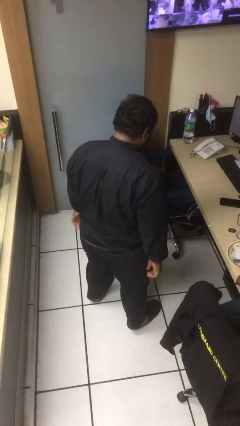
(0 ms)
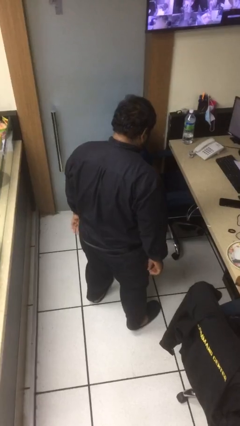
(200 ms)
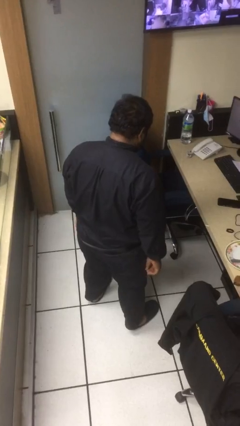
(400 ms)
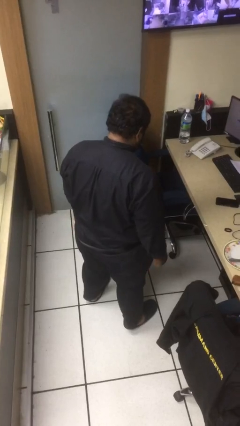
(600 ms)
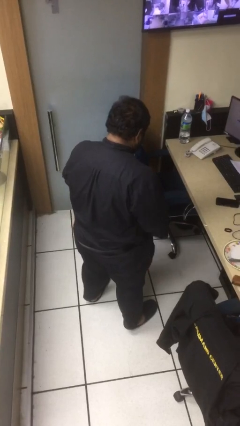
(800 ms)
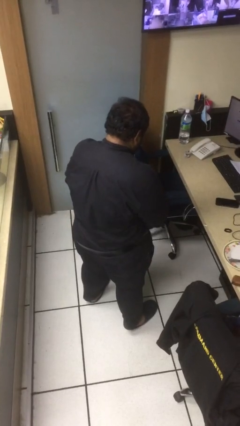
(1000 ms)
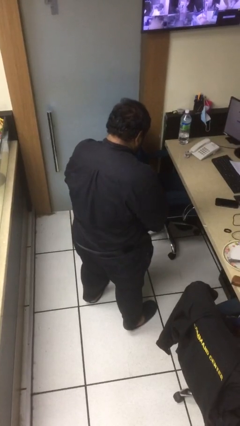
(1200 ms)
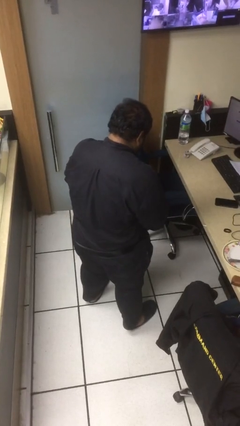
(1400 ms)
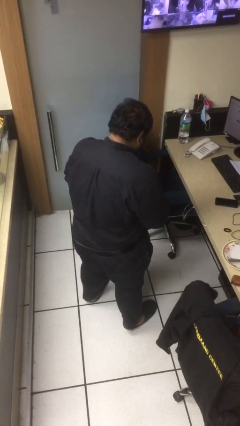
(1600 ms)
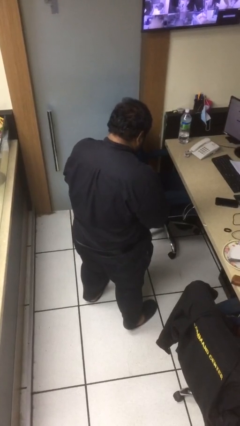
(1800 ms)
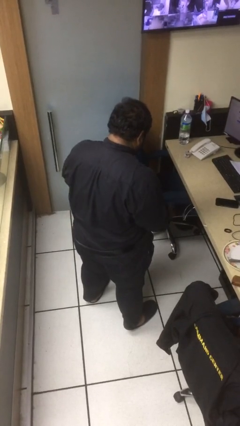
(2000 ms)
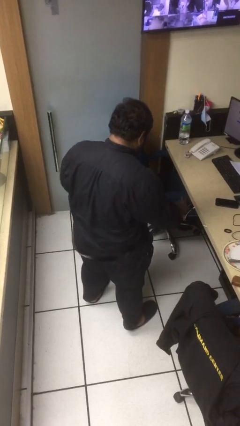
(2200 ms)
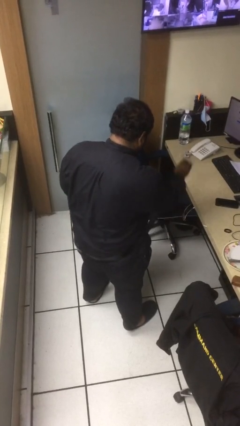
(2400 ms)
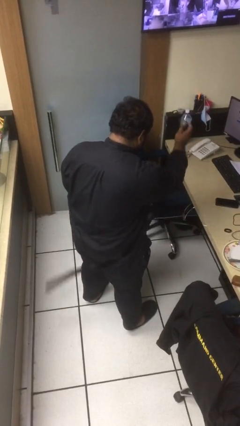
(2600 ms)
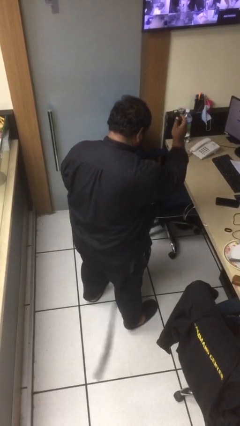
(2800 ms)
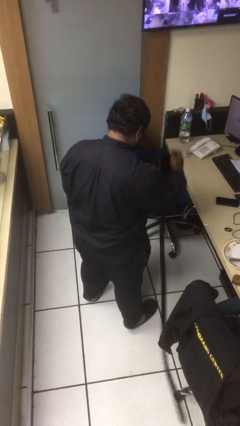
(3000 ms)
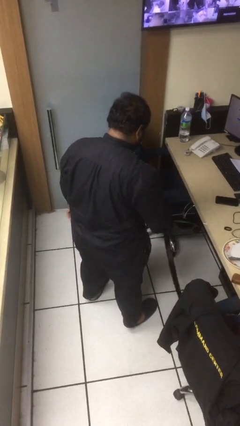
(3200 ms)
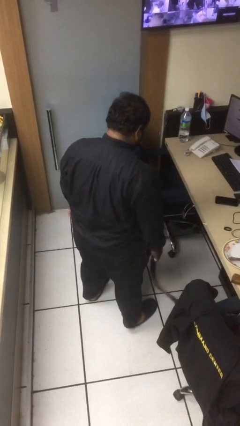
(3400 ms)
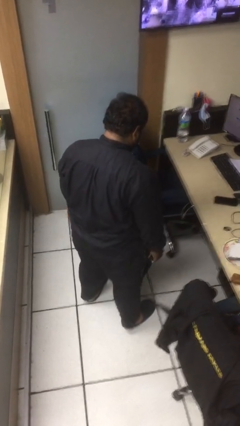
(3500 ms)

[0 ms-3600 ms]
person takes off belt

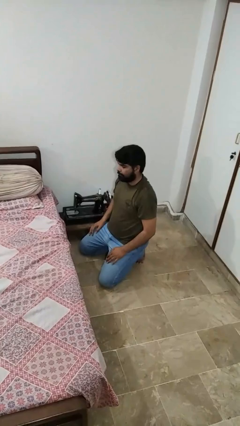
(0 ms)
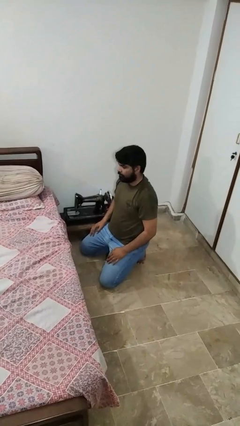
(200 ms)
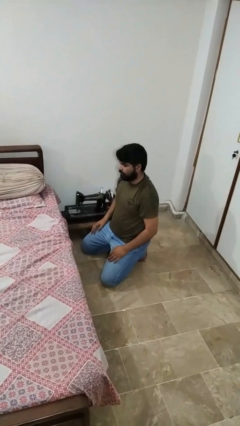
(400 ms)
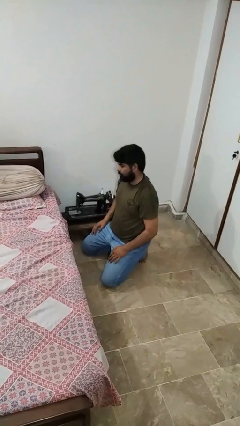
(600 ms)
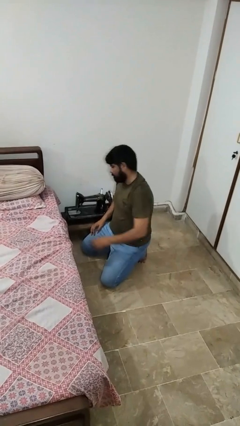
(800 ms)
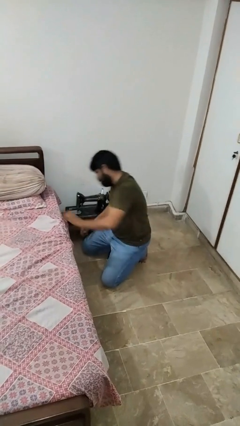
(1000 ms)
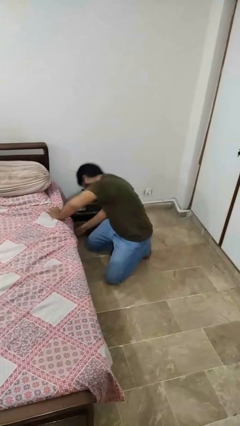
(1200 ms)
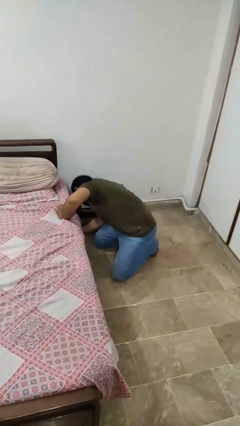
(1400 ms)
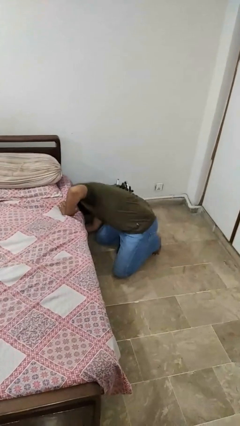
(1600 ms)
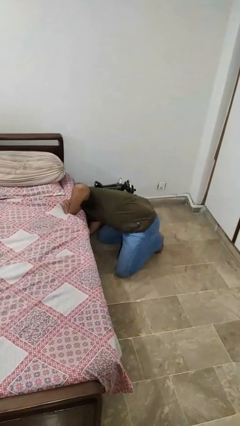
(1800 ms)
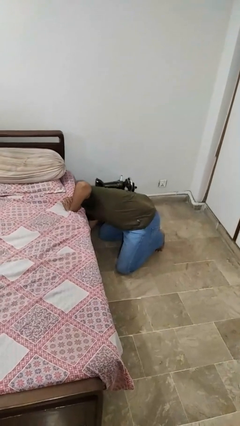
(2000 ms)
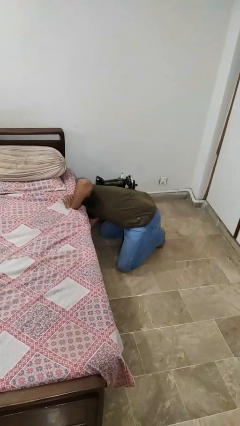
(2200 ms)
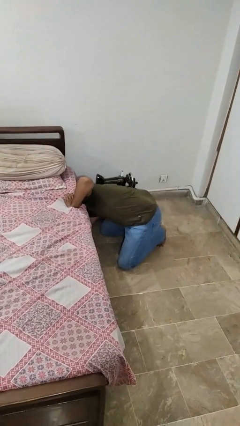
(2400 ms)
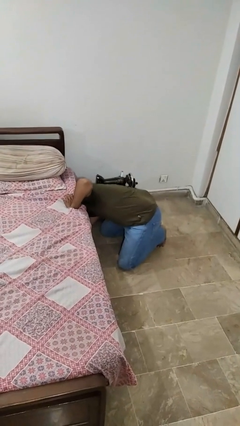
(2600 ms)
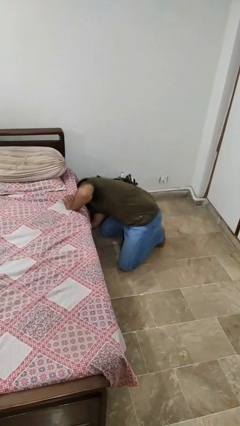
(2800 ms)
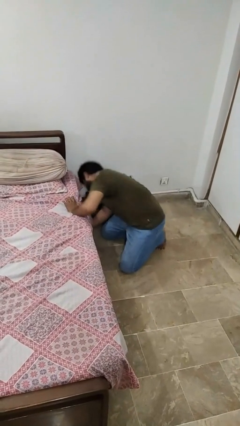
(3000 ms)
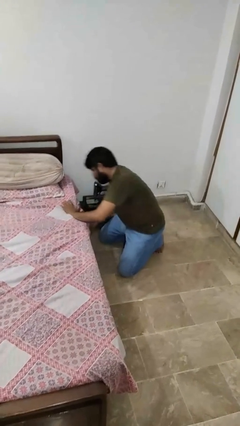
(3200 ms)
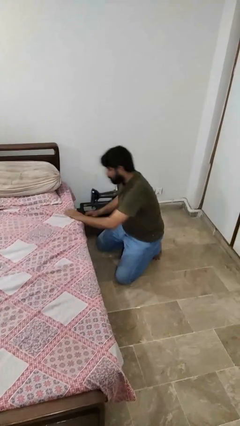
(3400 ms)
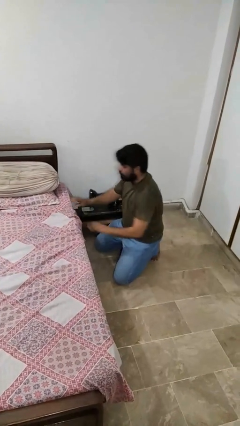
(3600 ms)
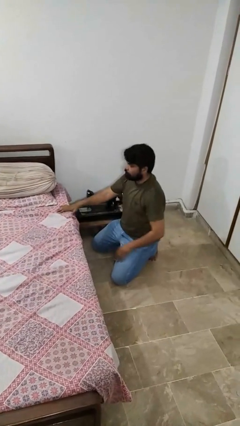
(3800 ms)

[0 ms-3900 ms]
person searches under bed

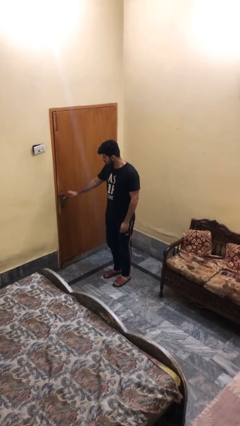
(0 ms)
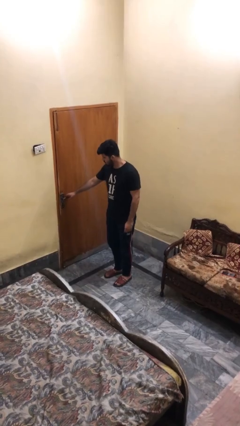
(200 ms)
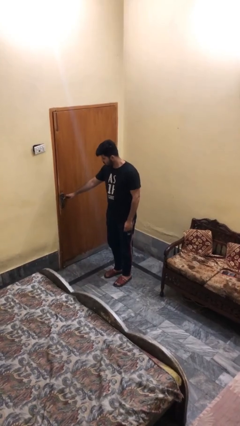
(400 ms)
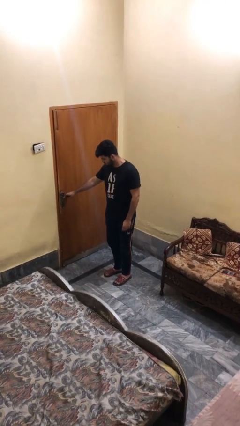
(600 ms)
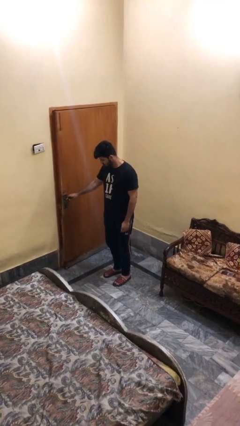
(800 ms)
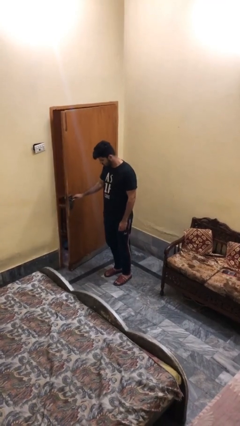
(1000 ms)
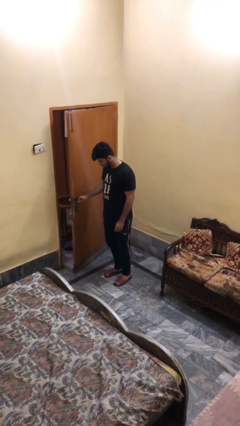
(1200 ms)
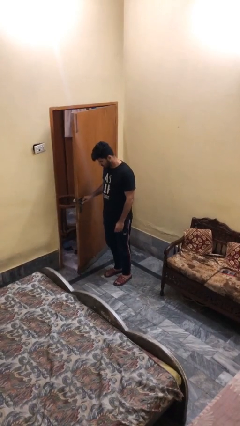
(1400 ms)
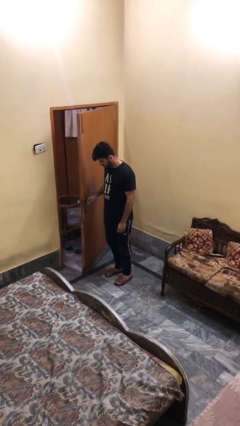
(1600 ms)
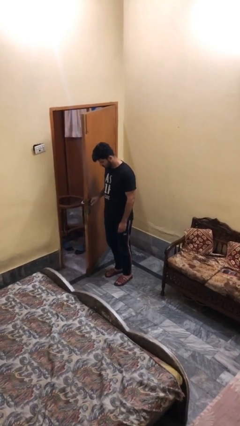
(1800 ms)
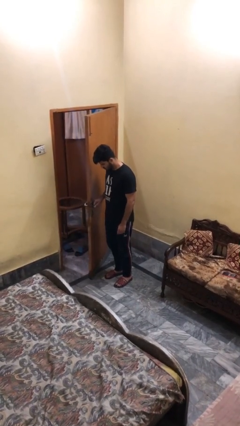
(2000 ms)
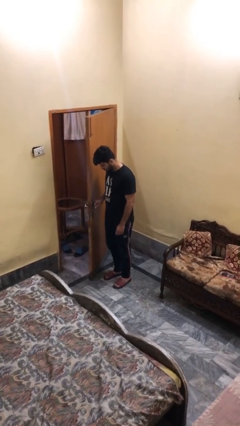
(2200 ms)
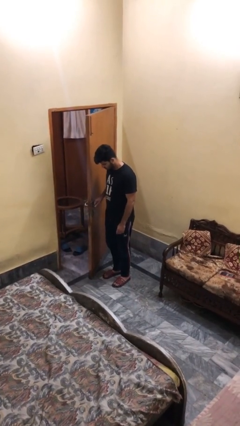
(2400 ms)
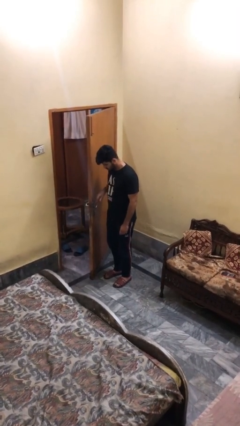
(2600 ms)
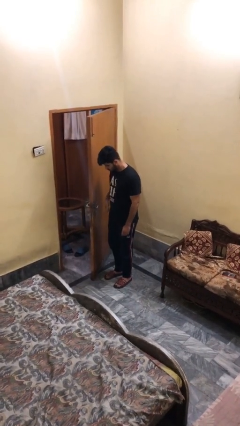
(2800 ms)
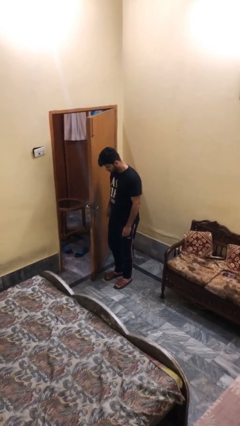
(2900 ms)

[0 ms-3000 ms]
person opens facility door

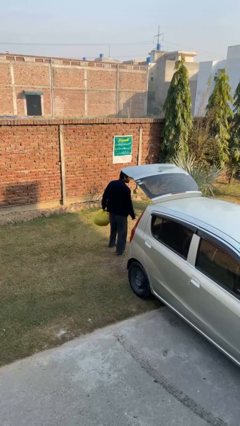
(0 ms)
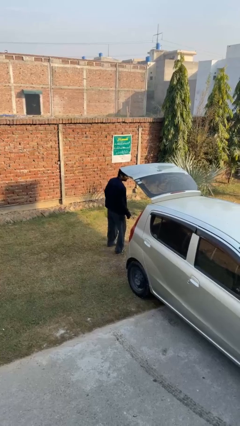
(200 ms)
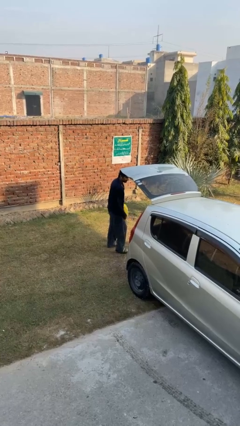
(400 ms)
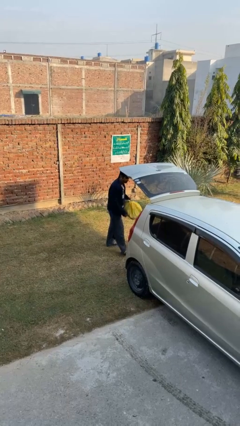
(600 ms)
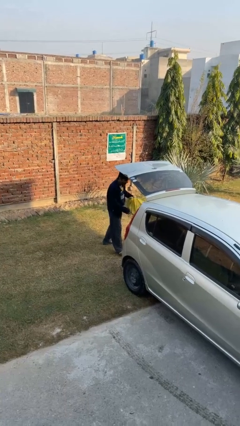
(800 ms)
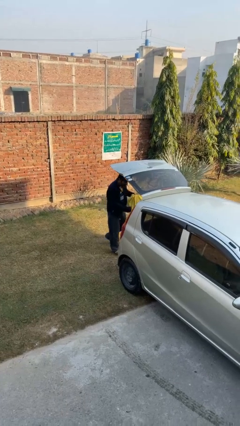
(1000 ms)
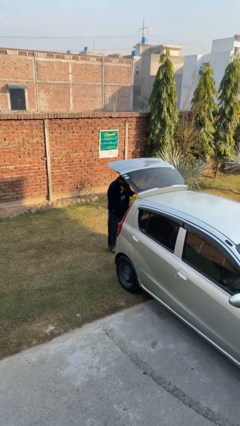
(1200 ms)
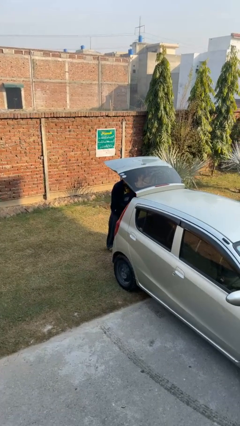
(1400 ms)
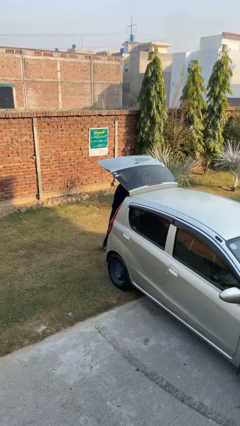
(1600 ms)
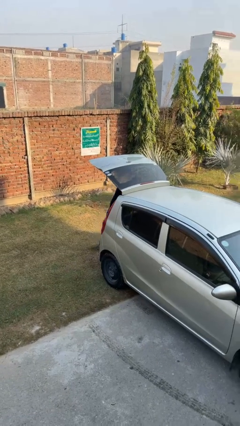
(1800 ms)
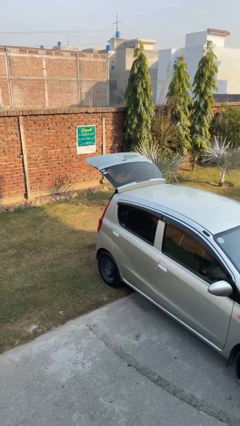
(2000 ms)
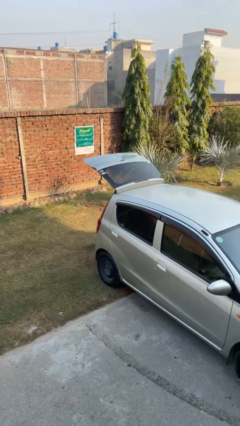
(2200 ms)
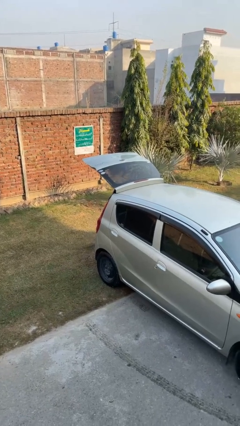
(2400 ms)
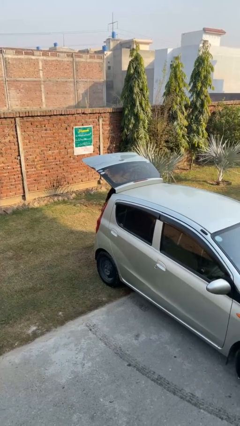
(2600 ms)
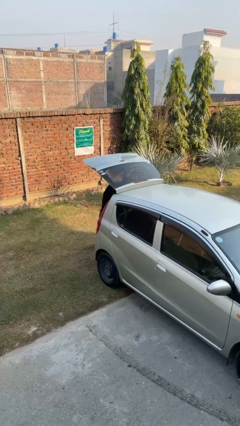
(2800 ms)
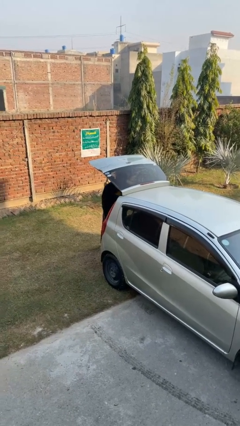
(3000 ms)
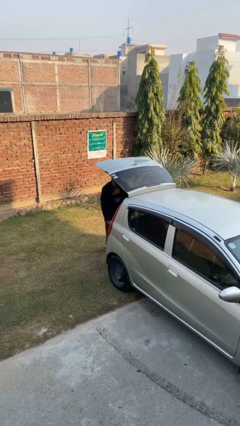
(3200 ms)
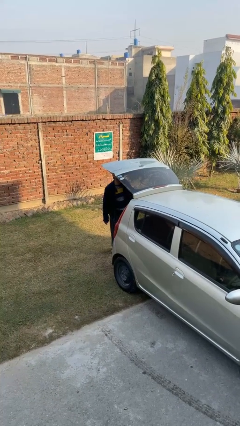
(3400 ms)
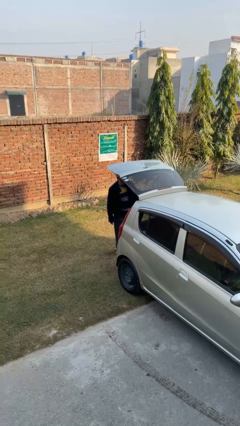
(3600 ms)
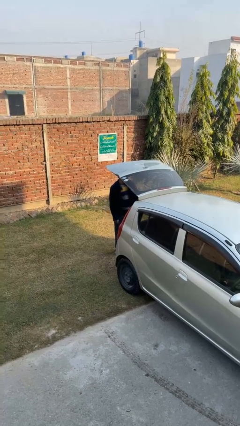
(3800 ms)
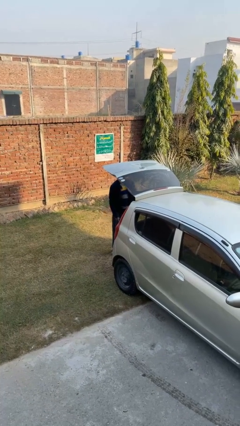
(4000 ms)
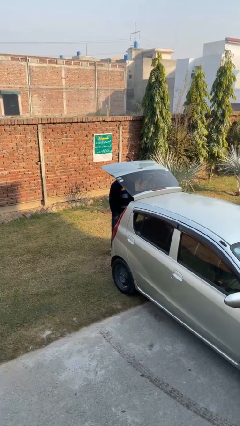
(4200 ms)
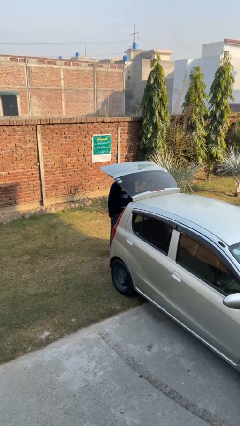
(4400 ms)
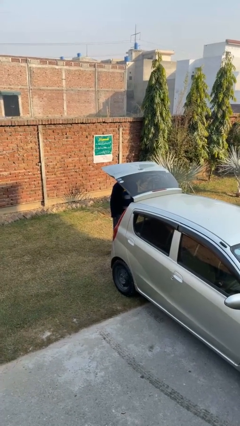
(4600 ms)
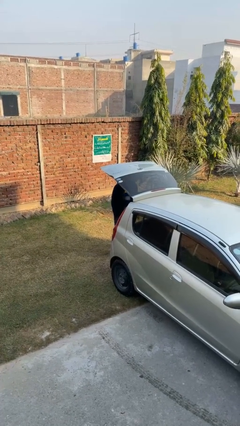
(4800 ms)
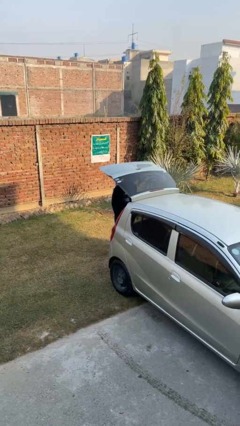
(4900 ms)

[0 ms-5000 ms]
person loads car

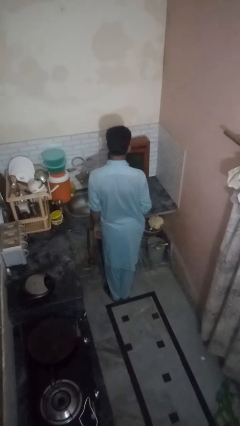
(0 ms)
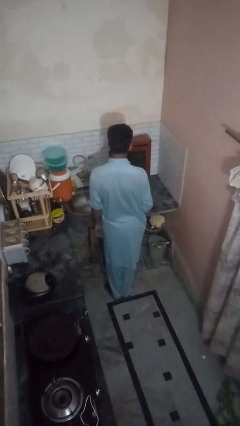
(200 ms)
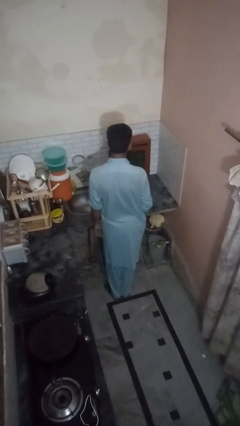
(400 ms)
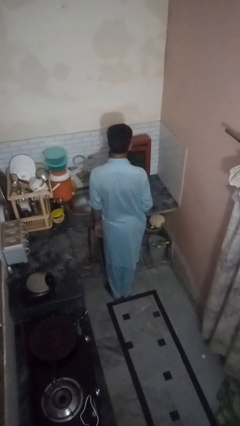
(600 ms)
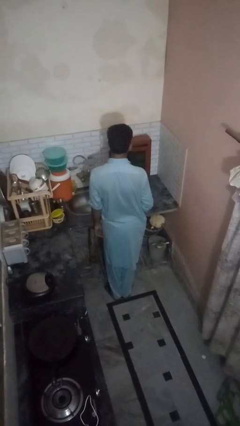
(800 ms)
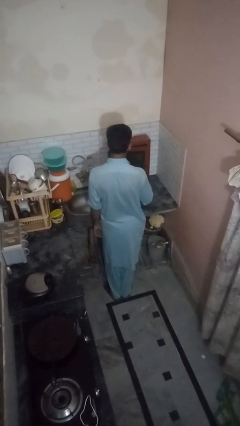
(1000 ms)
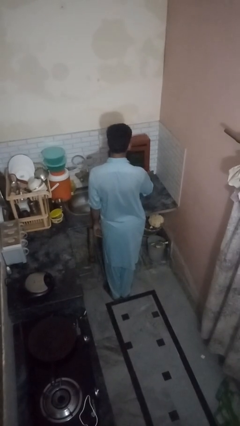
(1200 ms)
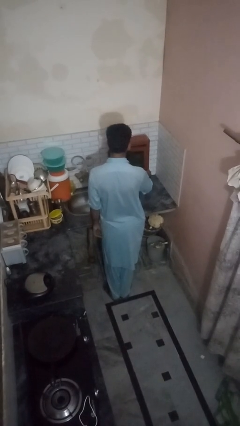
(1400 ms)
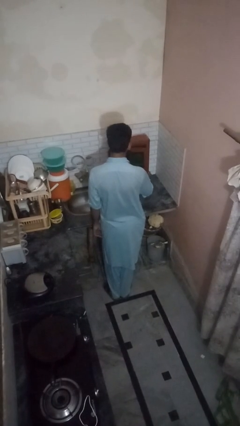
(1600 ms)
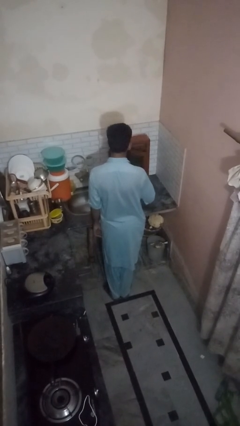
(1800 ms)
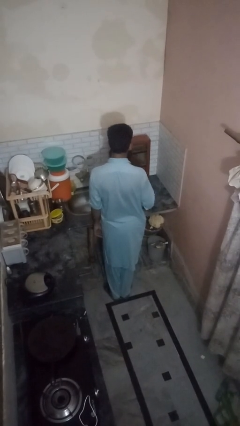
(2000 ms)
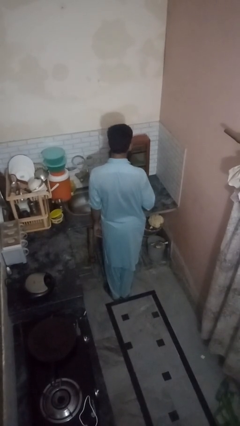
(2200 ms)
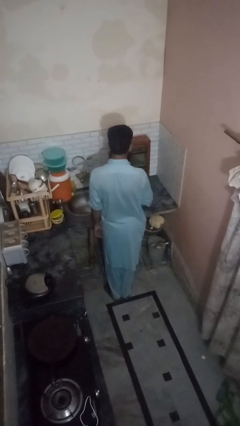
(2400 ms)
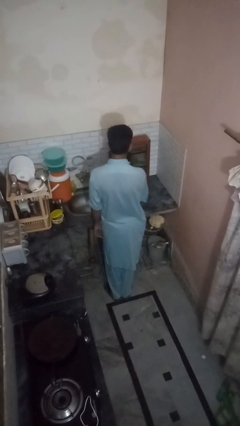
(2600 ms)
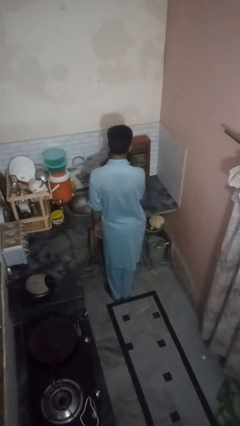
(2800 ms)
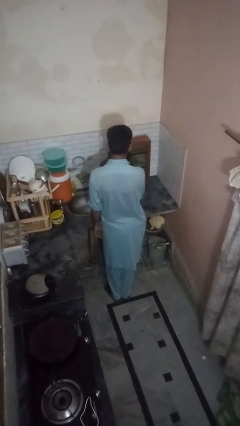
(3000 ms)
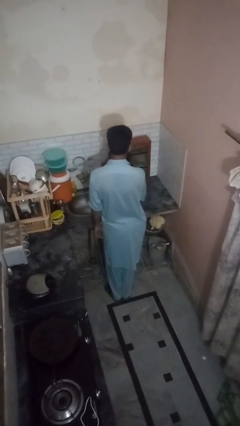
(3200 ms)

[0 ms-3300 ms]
person opens kitchen drawer
